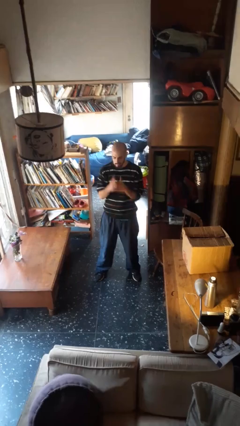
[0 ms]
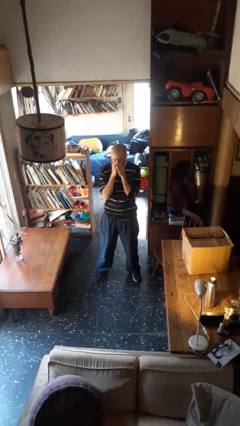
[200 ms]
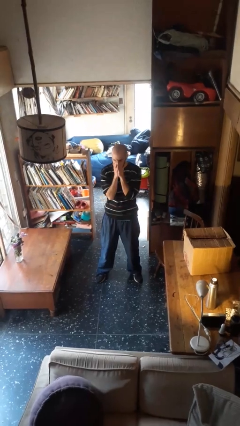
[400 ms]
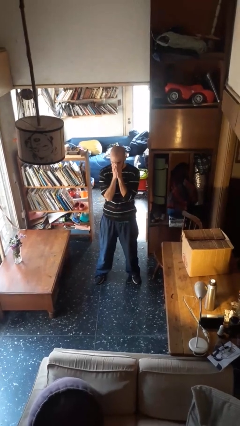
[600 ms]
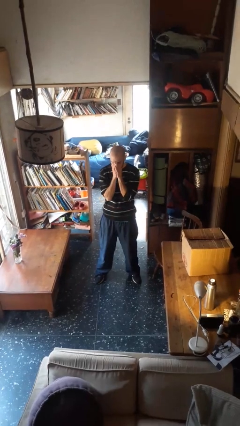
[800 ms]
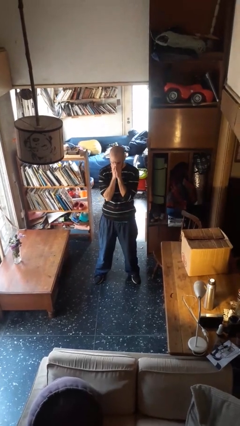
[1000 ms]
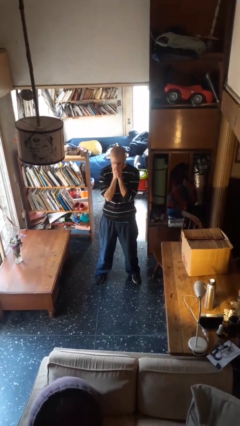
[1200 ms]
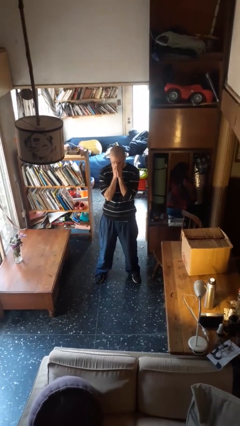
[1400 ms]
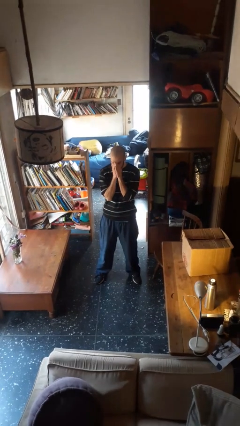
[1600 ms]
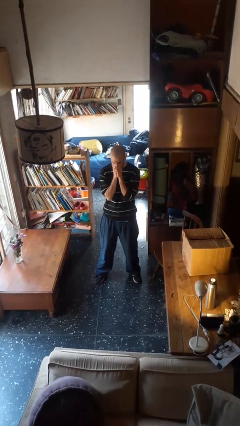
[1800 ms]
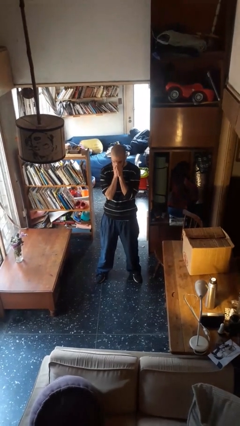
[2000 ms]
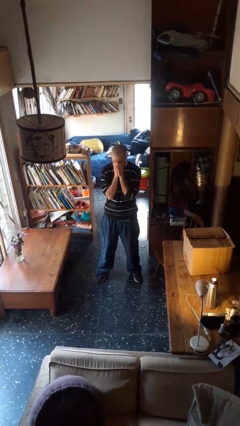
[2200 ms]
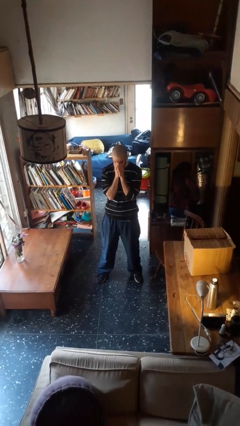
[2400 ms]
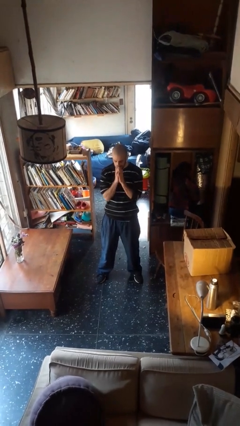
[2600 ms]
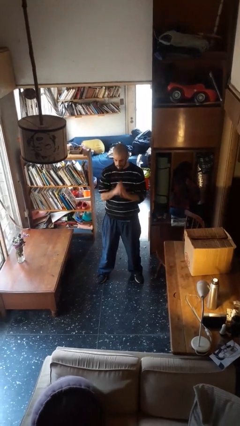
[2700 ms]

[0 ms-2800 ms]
person covers face with hands

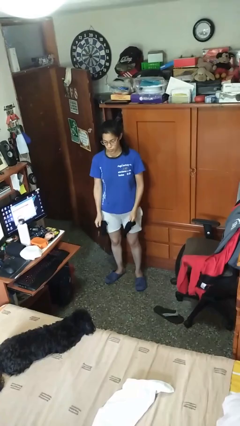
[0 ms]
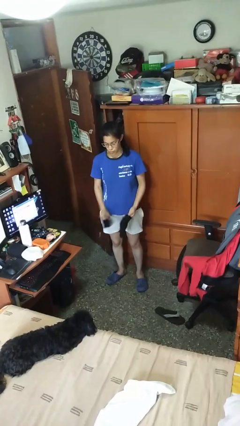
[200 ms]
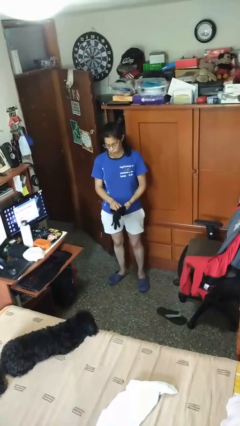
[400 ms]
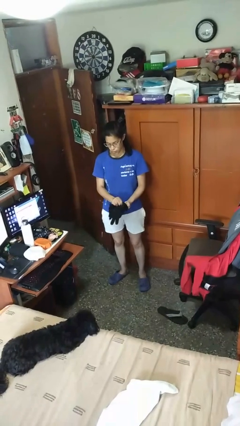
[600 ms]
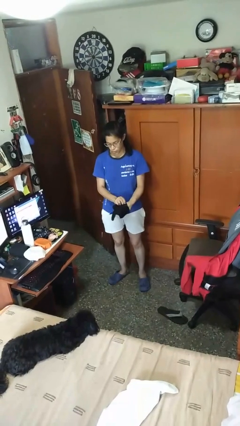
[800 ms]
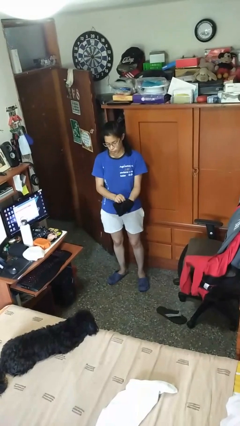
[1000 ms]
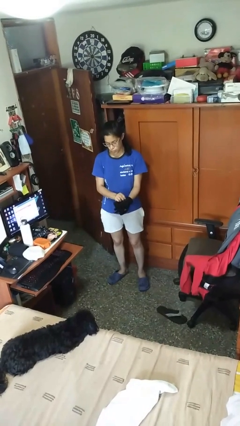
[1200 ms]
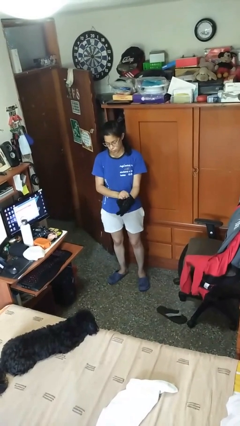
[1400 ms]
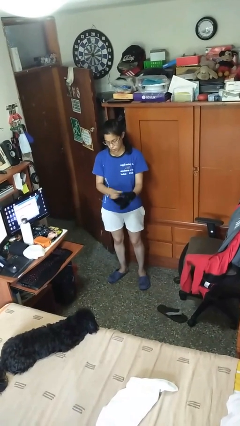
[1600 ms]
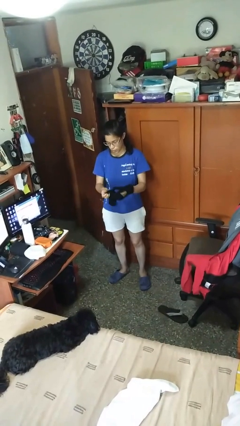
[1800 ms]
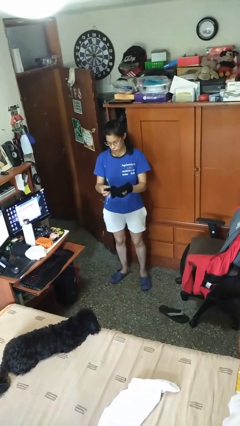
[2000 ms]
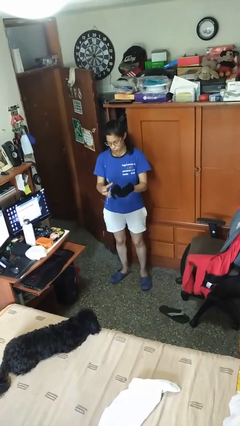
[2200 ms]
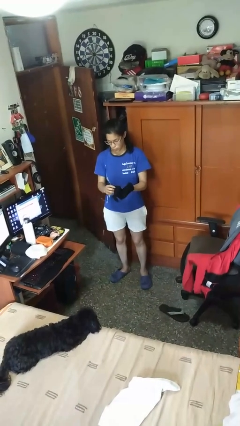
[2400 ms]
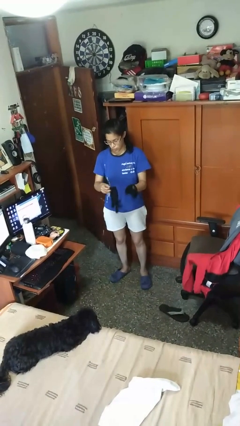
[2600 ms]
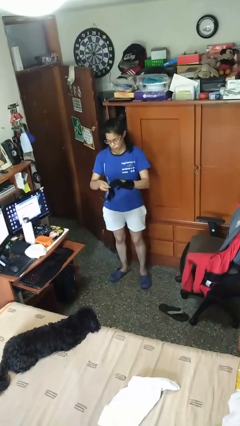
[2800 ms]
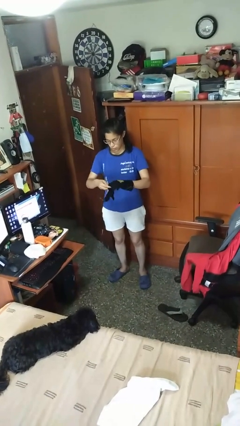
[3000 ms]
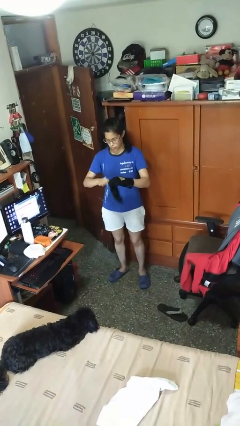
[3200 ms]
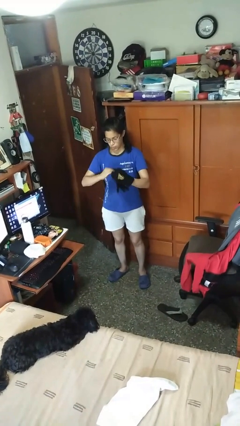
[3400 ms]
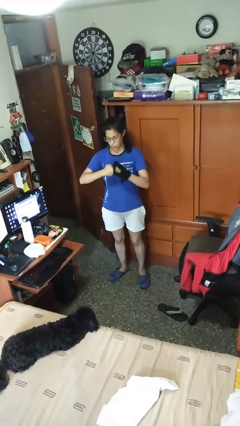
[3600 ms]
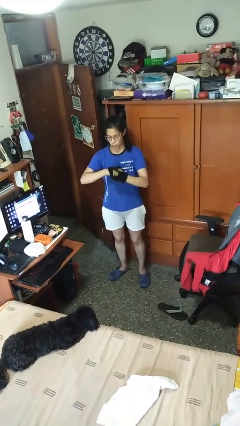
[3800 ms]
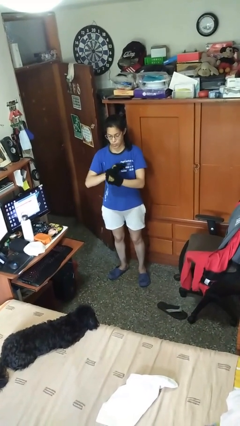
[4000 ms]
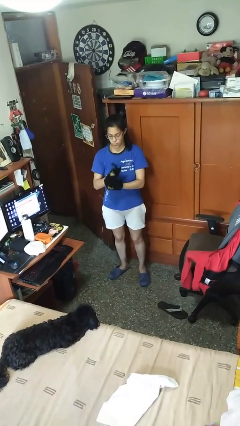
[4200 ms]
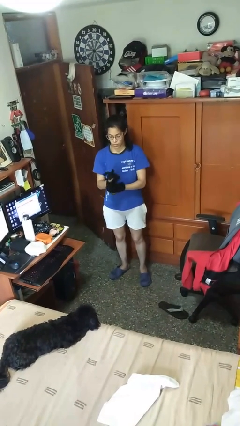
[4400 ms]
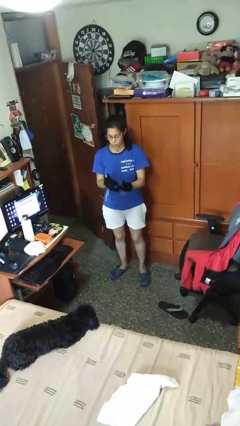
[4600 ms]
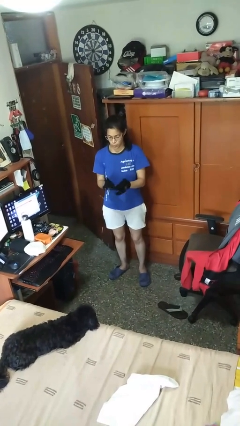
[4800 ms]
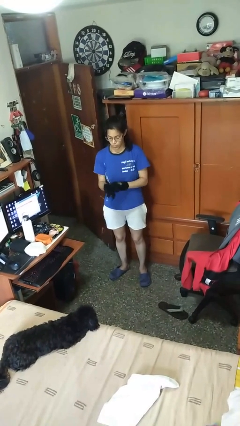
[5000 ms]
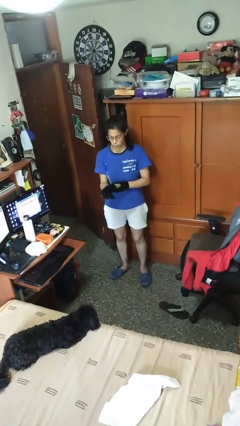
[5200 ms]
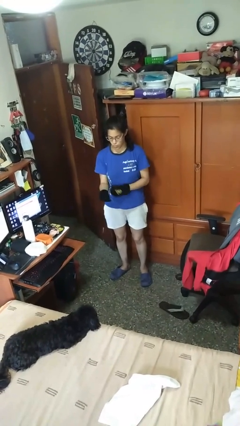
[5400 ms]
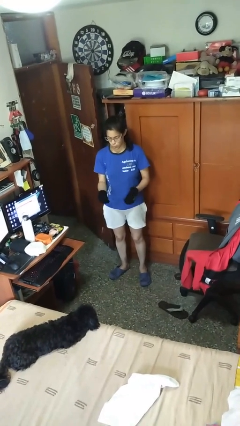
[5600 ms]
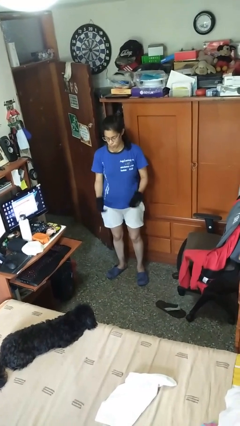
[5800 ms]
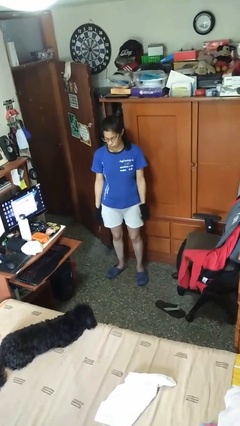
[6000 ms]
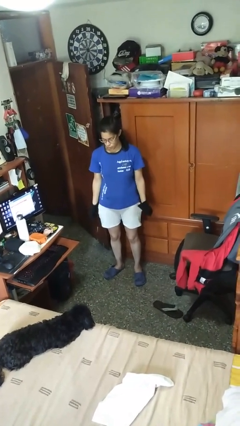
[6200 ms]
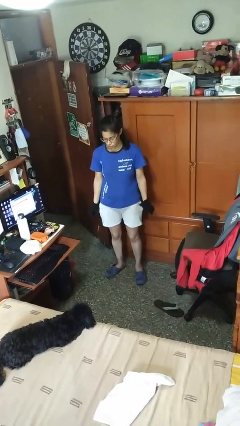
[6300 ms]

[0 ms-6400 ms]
person puts on gloves

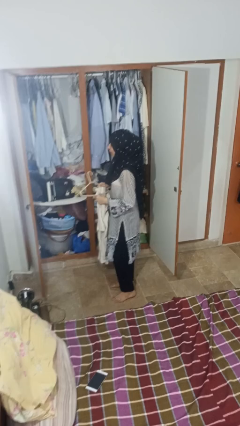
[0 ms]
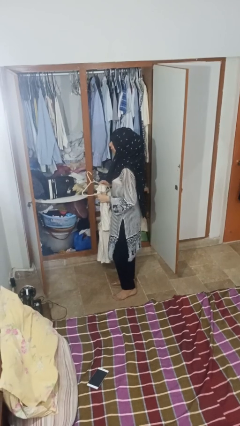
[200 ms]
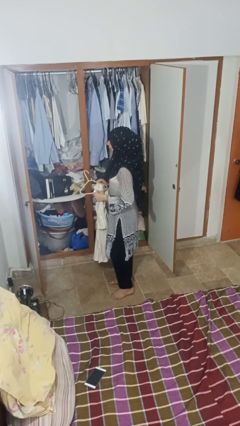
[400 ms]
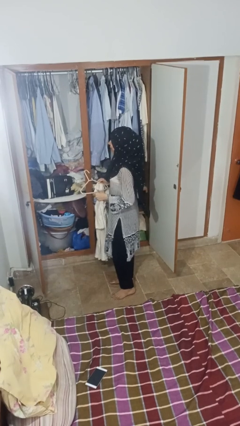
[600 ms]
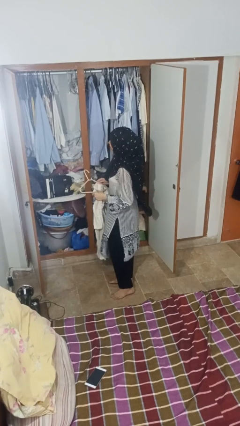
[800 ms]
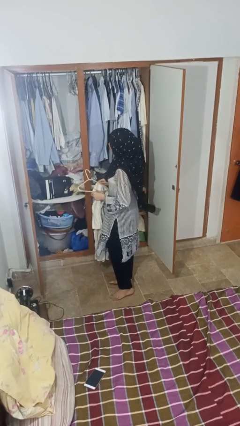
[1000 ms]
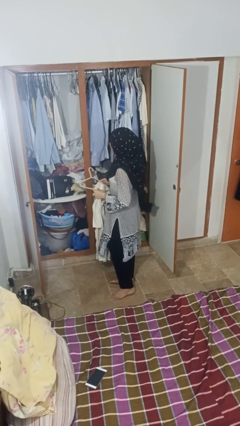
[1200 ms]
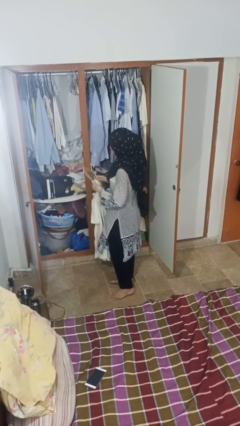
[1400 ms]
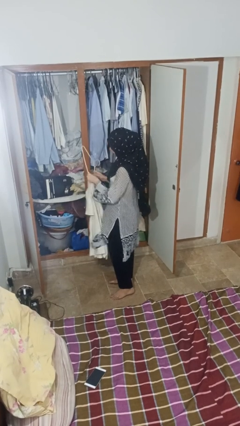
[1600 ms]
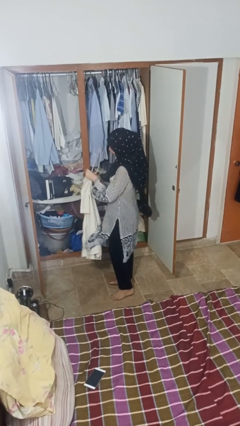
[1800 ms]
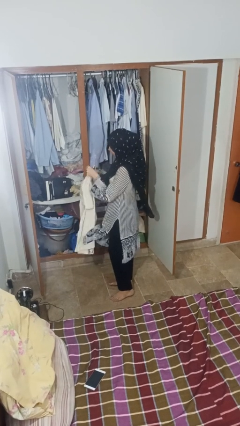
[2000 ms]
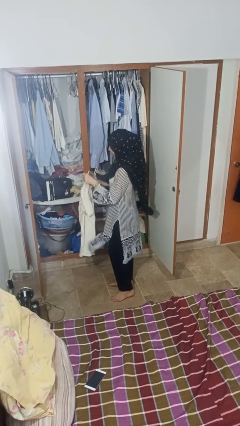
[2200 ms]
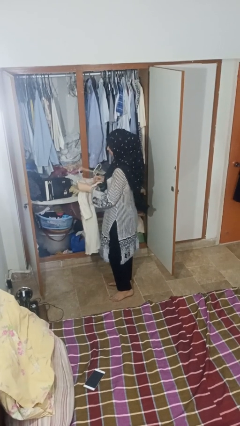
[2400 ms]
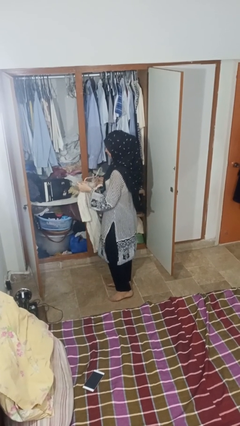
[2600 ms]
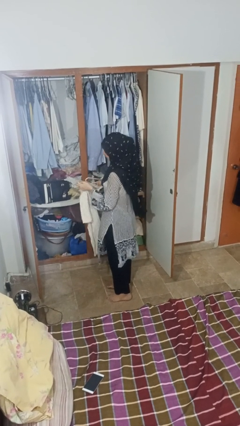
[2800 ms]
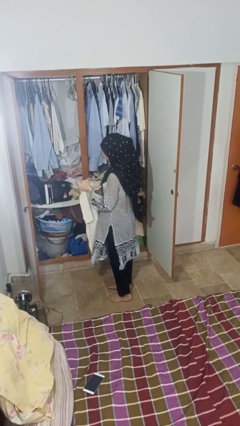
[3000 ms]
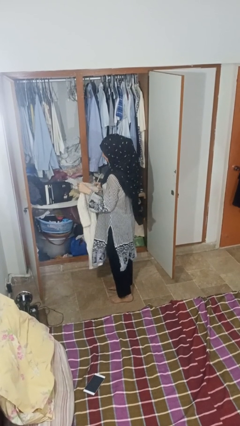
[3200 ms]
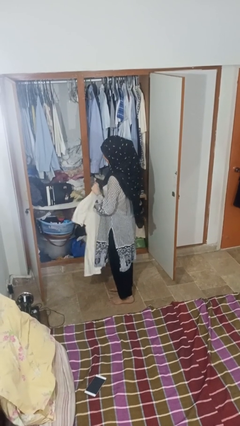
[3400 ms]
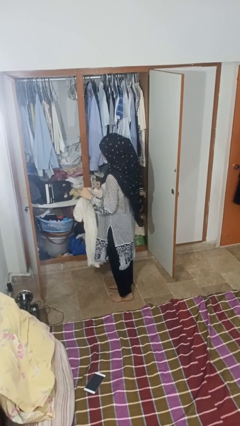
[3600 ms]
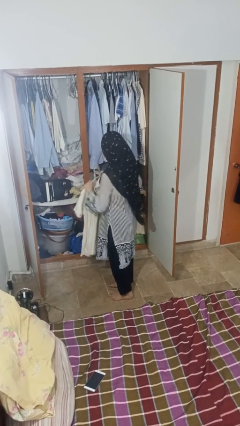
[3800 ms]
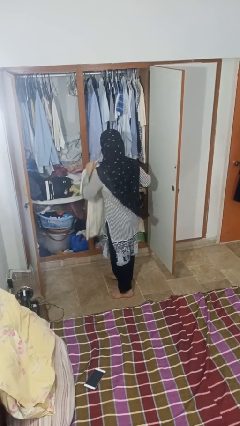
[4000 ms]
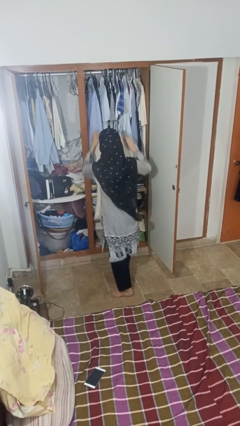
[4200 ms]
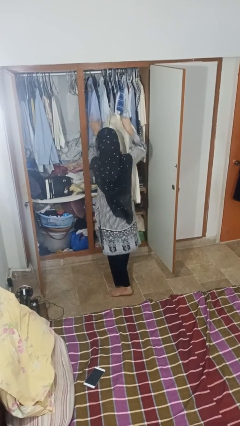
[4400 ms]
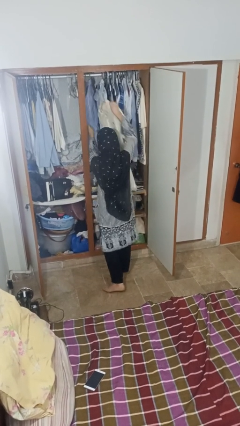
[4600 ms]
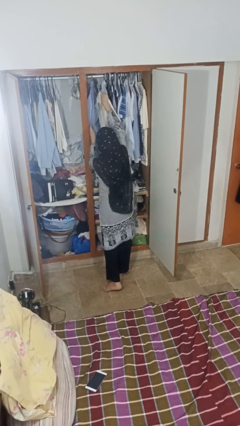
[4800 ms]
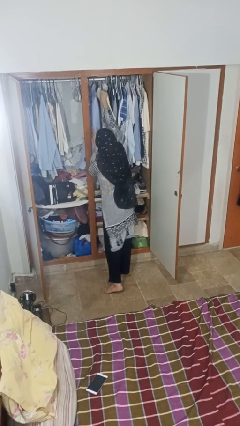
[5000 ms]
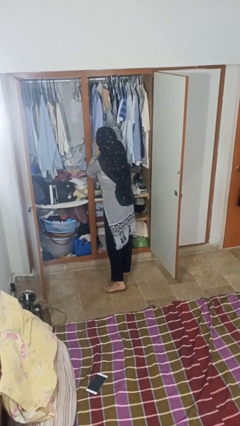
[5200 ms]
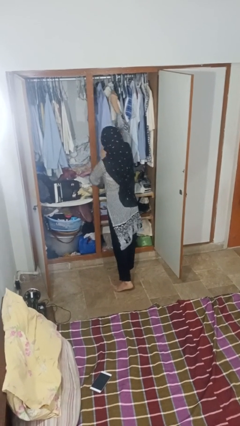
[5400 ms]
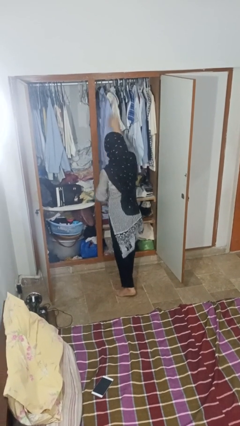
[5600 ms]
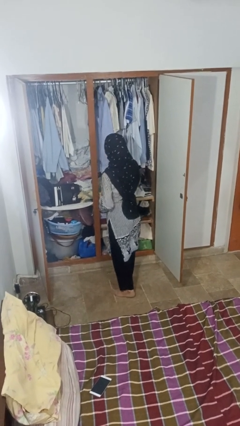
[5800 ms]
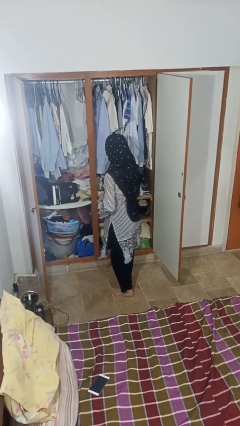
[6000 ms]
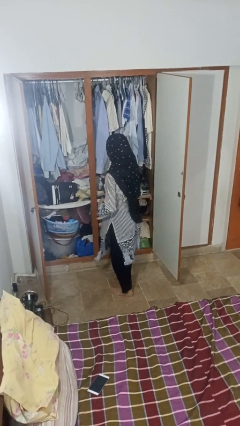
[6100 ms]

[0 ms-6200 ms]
person puts clothes into closet

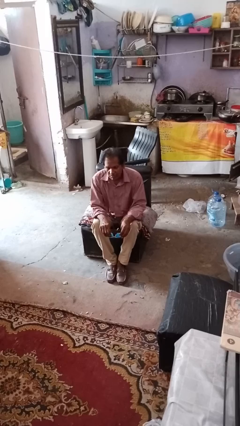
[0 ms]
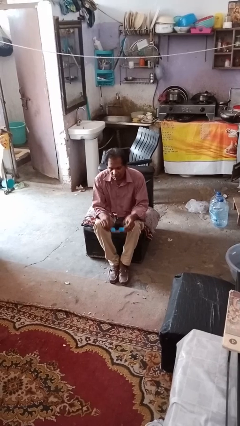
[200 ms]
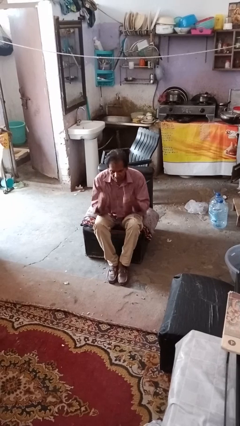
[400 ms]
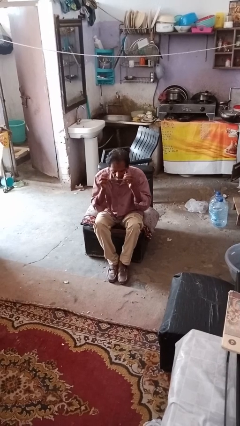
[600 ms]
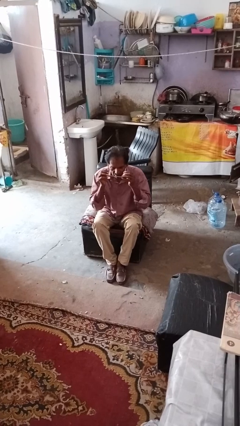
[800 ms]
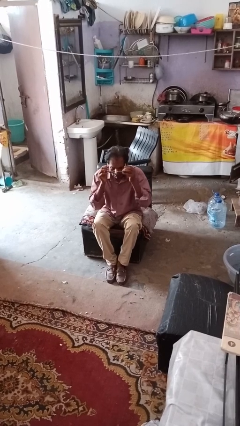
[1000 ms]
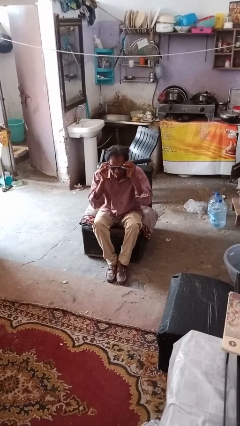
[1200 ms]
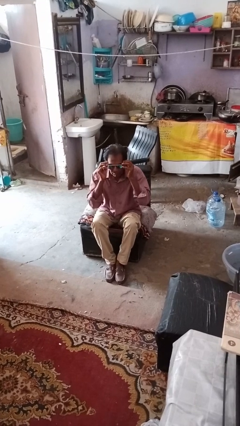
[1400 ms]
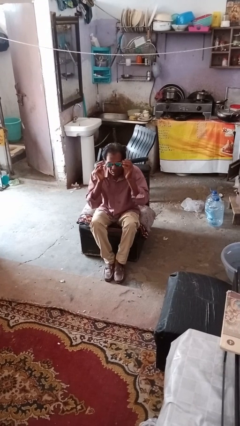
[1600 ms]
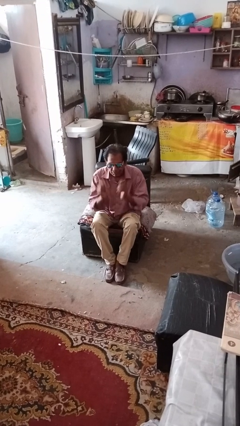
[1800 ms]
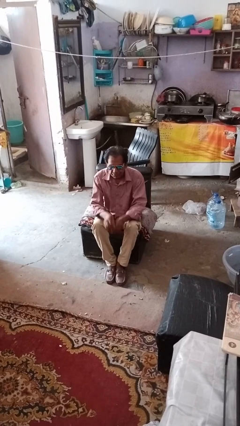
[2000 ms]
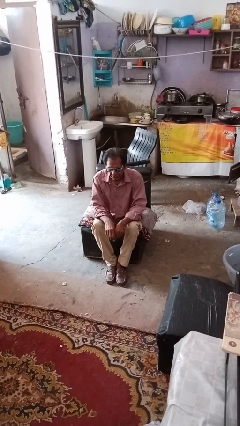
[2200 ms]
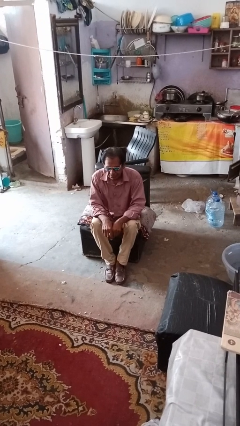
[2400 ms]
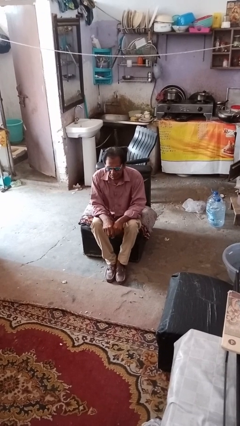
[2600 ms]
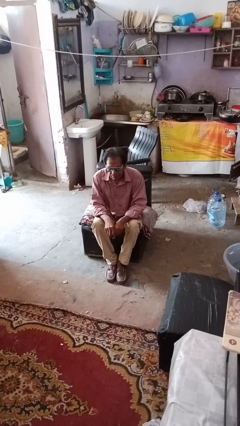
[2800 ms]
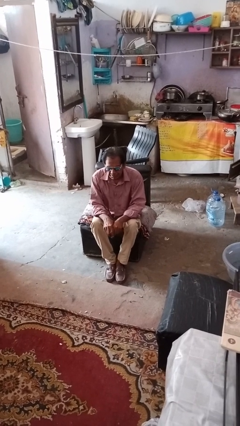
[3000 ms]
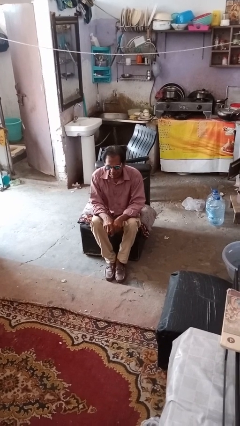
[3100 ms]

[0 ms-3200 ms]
person puts on sunglasses
